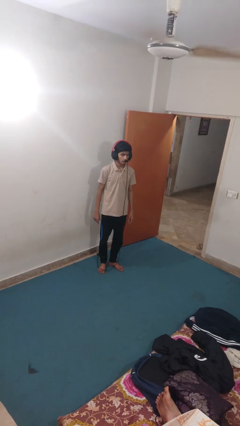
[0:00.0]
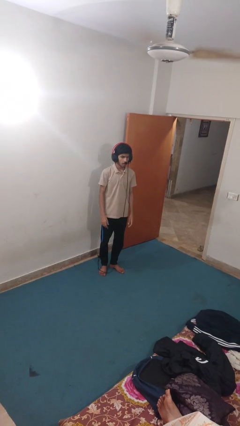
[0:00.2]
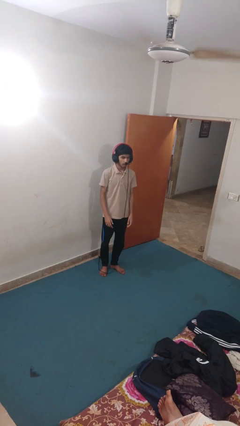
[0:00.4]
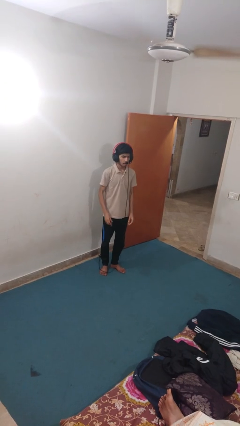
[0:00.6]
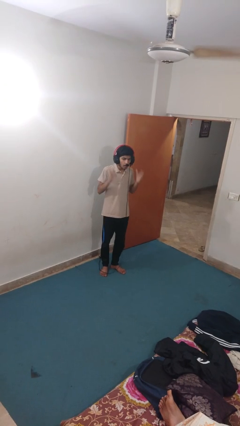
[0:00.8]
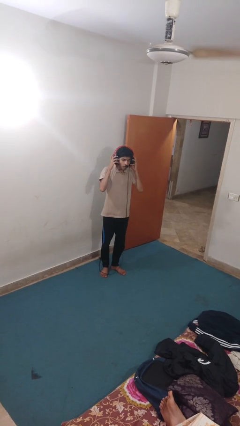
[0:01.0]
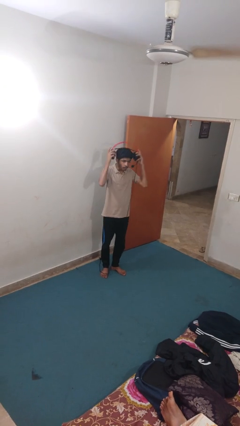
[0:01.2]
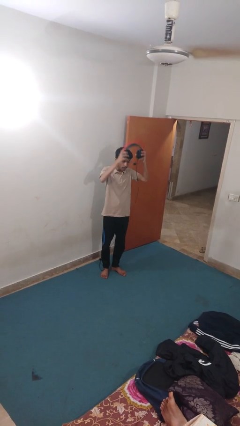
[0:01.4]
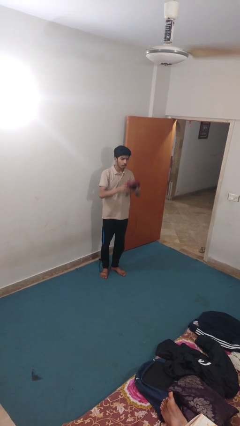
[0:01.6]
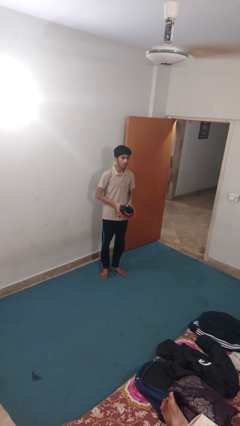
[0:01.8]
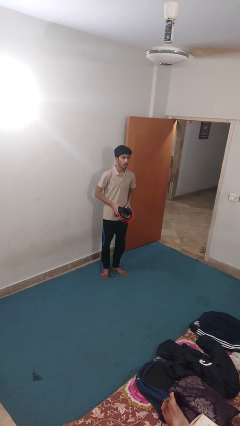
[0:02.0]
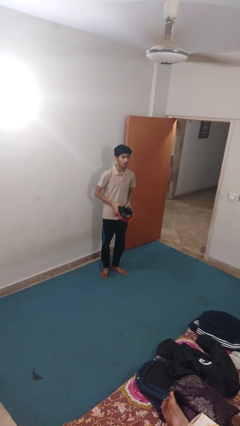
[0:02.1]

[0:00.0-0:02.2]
person takes off headphones

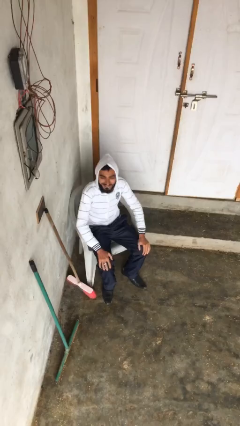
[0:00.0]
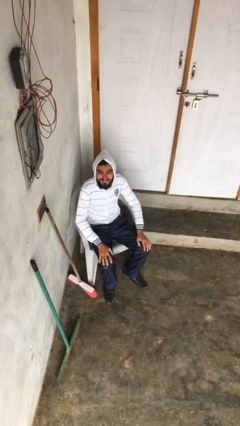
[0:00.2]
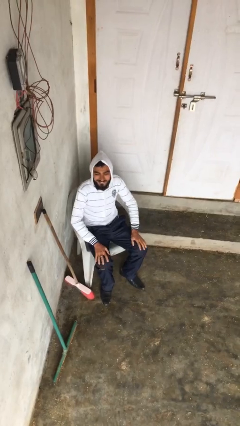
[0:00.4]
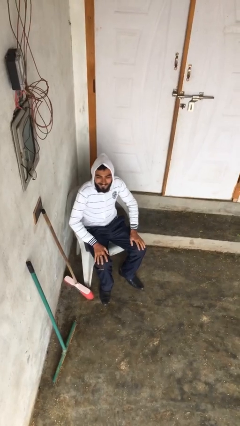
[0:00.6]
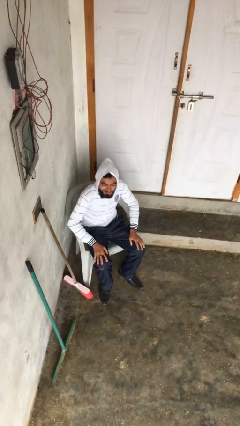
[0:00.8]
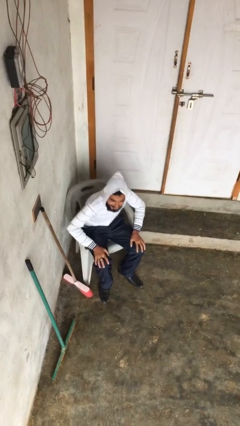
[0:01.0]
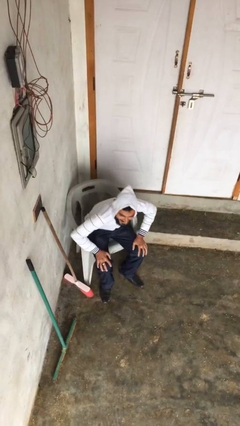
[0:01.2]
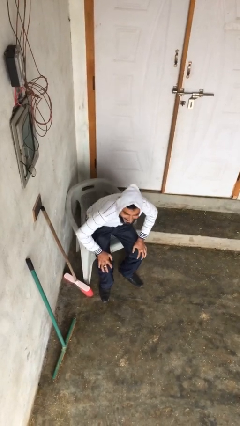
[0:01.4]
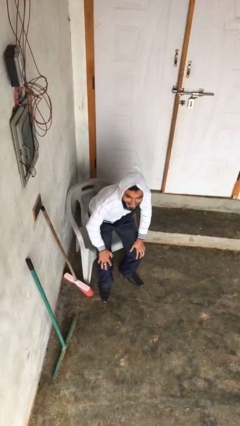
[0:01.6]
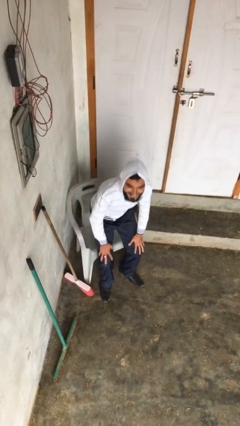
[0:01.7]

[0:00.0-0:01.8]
person stands up

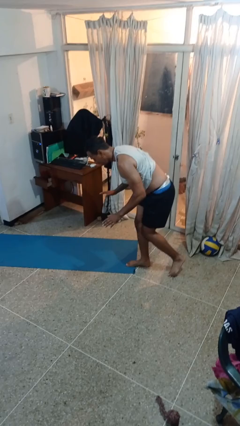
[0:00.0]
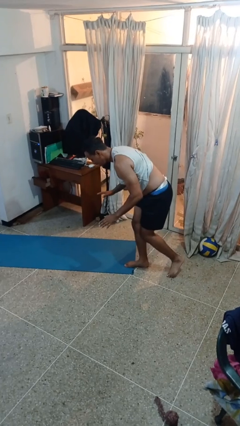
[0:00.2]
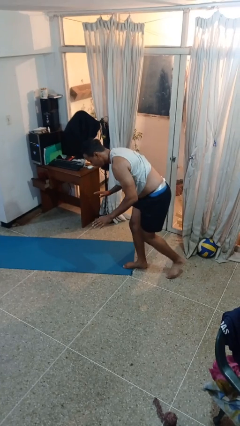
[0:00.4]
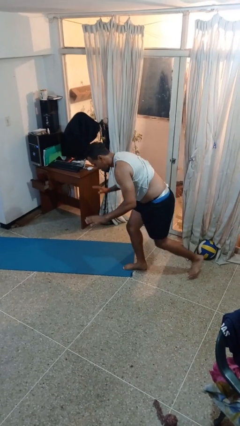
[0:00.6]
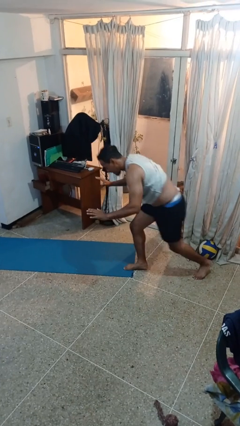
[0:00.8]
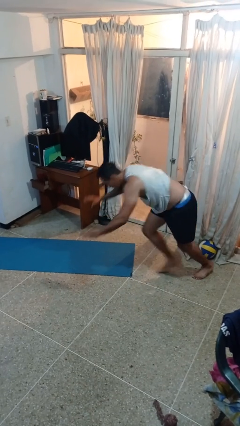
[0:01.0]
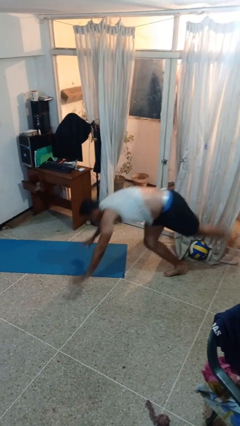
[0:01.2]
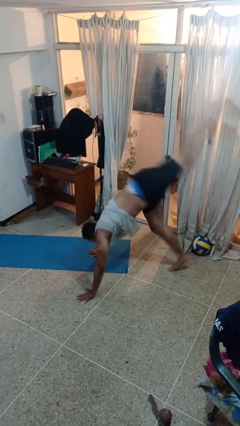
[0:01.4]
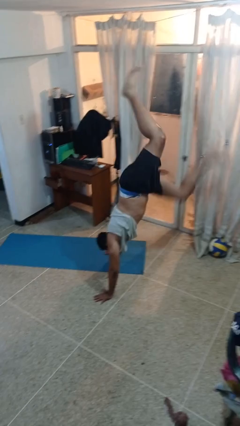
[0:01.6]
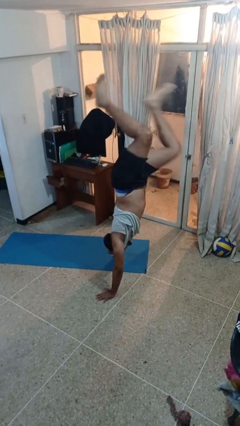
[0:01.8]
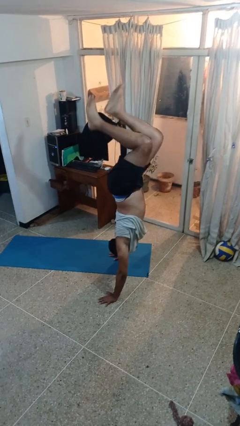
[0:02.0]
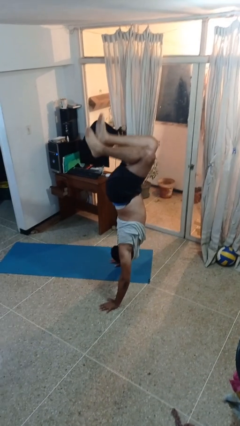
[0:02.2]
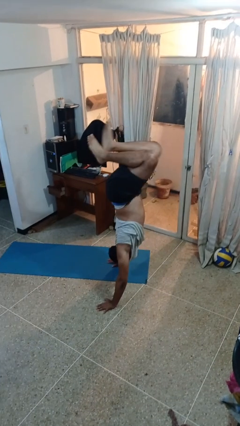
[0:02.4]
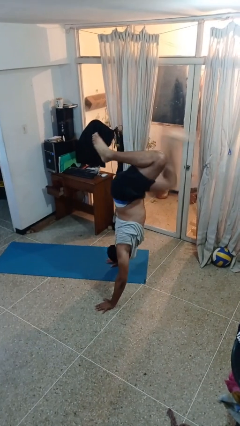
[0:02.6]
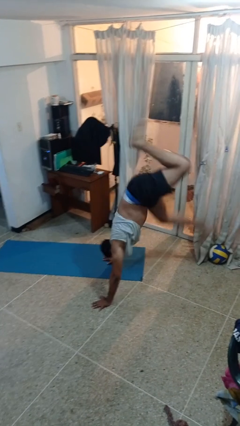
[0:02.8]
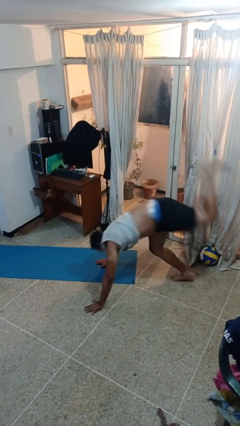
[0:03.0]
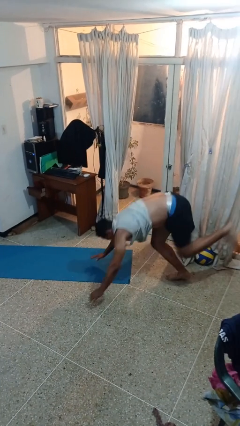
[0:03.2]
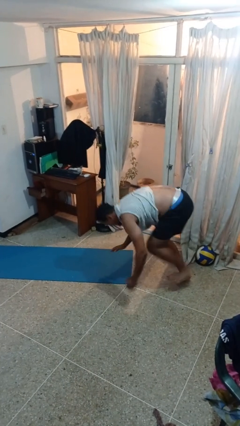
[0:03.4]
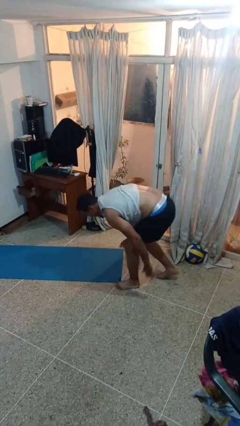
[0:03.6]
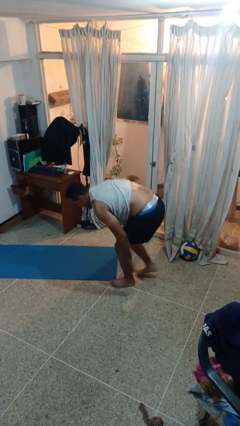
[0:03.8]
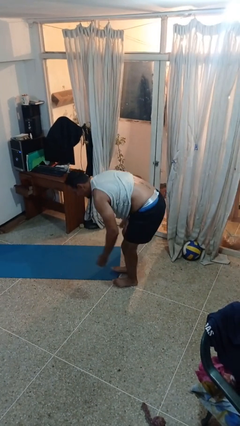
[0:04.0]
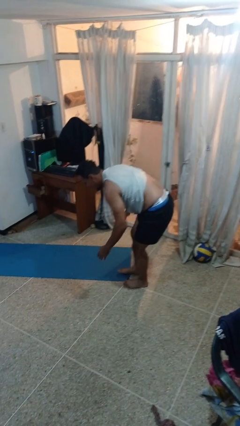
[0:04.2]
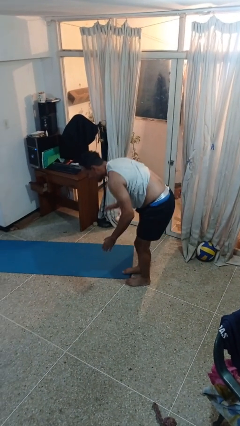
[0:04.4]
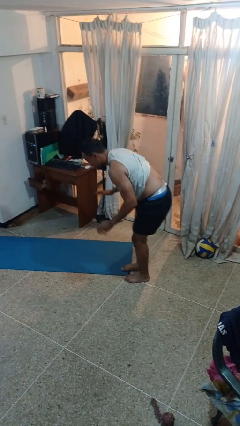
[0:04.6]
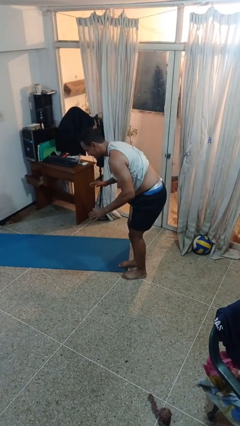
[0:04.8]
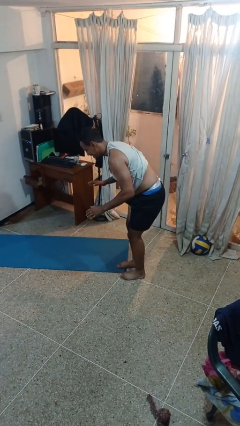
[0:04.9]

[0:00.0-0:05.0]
person handstand

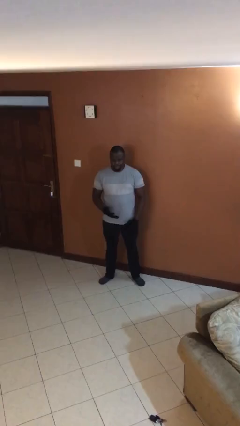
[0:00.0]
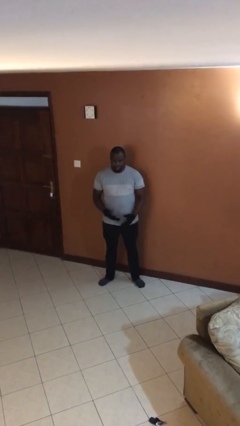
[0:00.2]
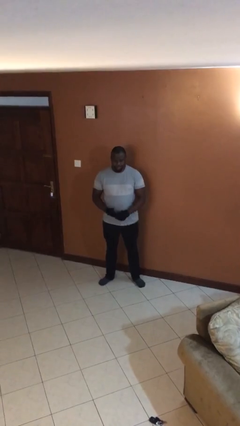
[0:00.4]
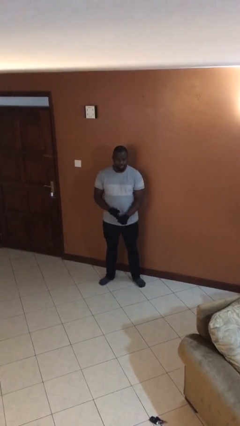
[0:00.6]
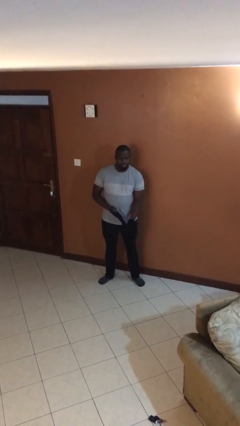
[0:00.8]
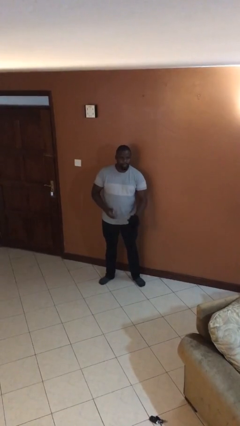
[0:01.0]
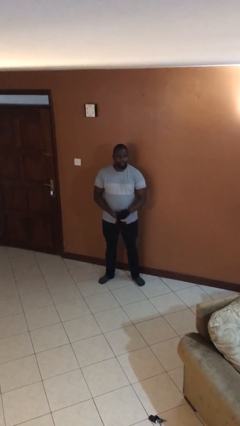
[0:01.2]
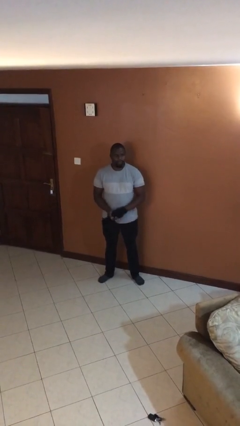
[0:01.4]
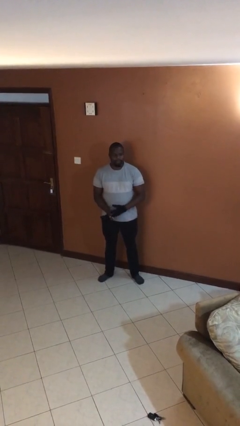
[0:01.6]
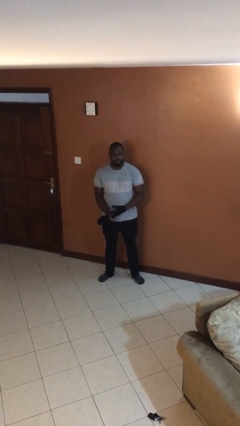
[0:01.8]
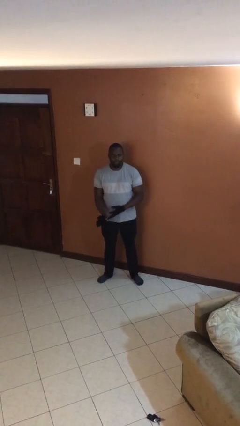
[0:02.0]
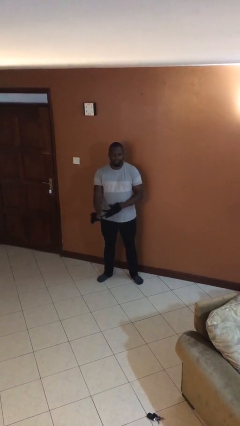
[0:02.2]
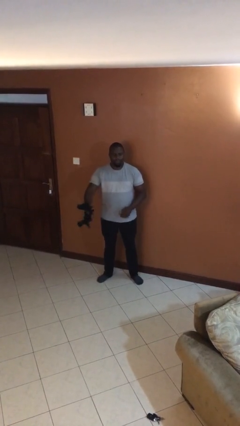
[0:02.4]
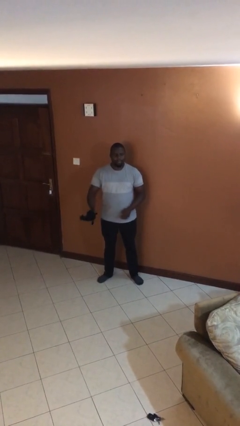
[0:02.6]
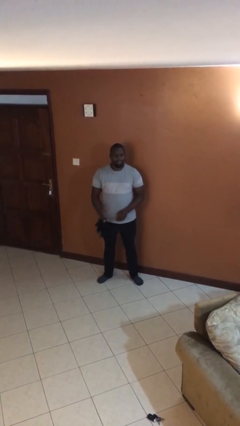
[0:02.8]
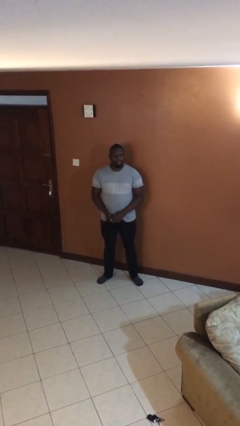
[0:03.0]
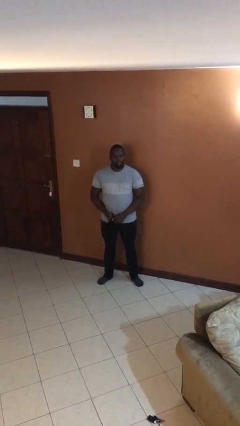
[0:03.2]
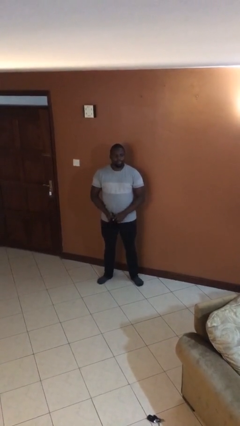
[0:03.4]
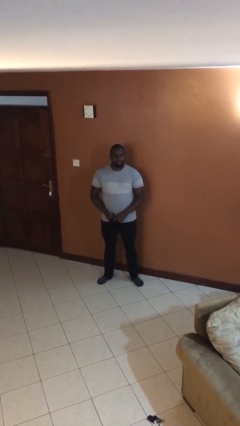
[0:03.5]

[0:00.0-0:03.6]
person takes off gloves

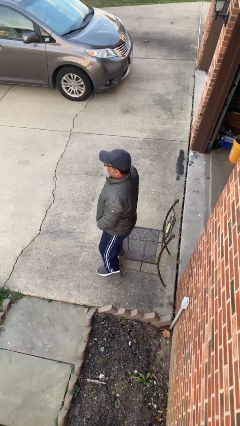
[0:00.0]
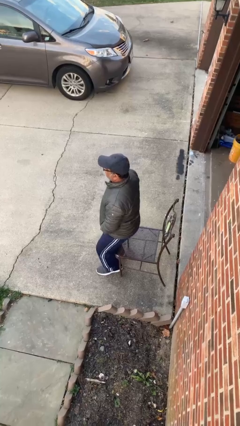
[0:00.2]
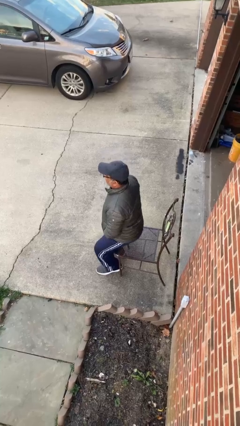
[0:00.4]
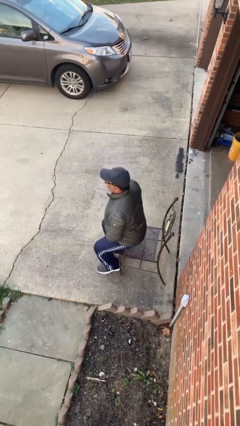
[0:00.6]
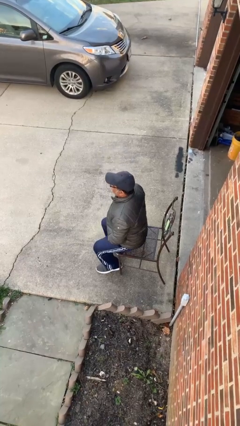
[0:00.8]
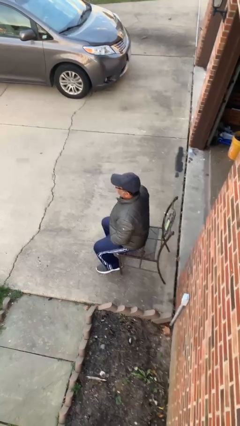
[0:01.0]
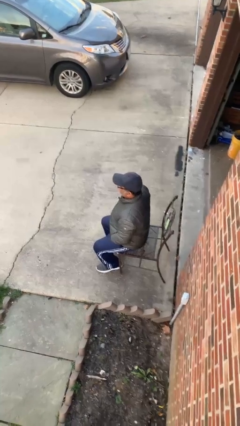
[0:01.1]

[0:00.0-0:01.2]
person sits down

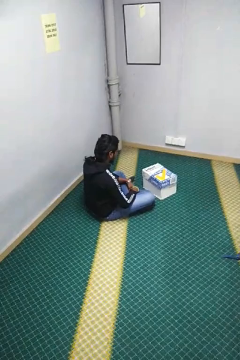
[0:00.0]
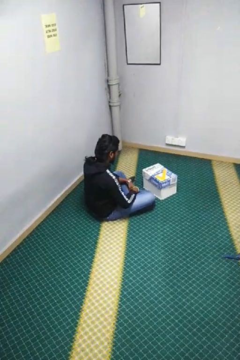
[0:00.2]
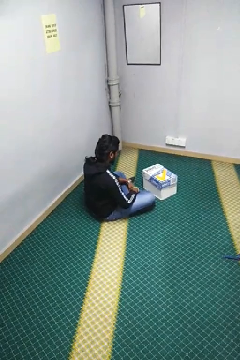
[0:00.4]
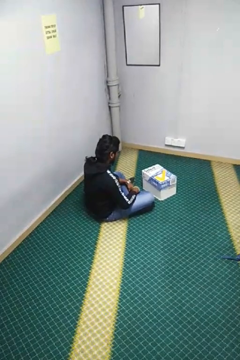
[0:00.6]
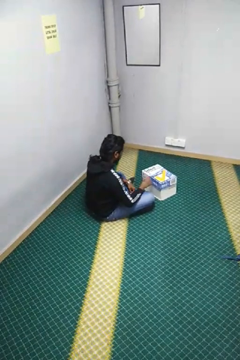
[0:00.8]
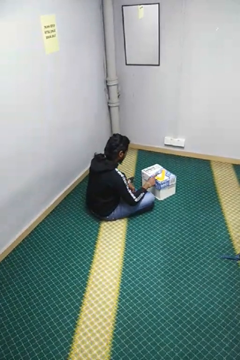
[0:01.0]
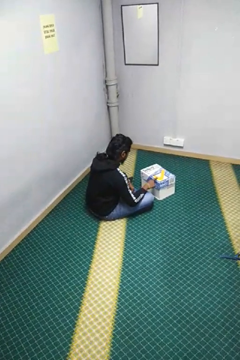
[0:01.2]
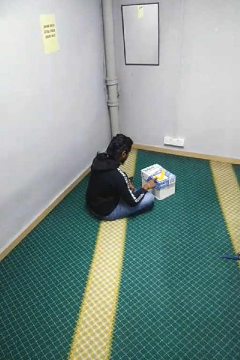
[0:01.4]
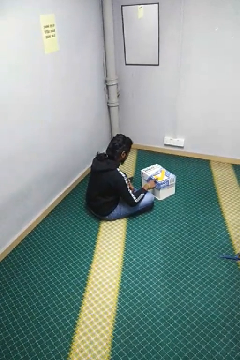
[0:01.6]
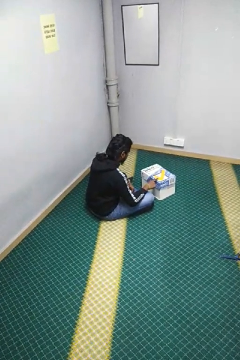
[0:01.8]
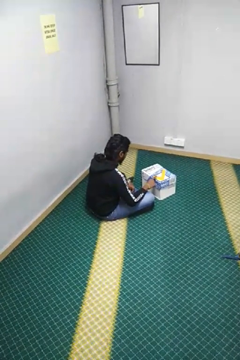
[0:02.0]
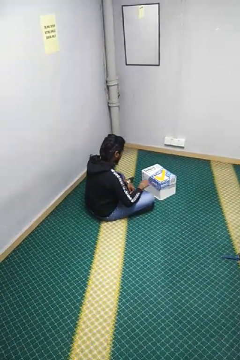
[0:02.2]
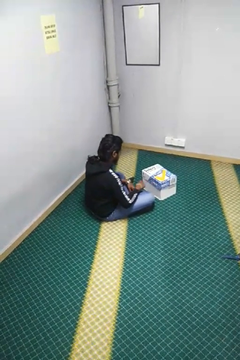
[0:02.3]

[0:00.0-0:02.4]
person taps object with finger

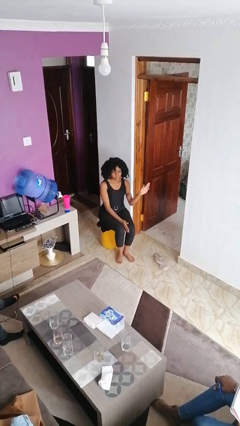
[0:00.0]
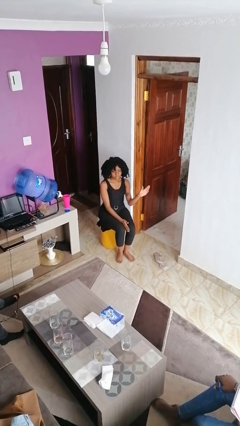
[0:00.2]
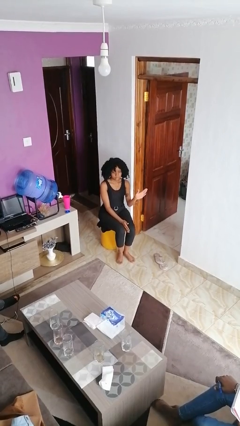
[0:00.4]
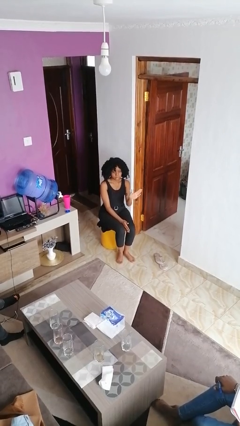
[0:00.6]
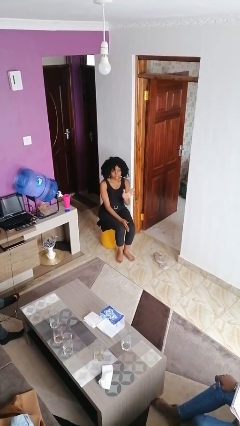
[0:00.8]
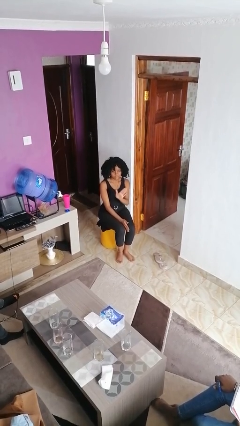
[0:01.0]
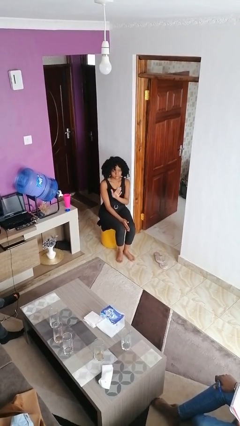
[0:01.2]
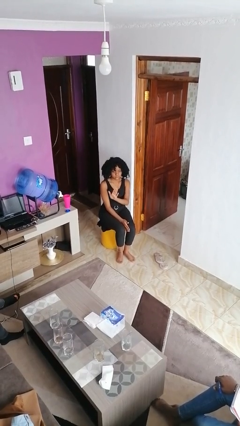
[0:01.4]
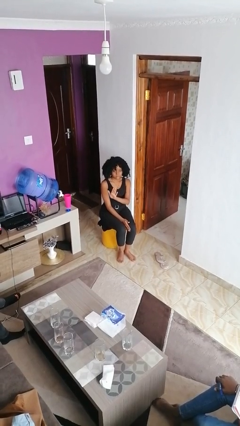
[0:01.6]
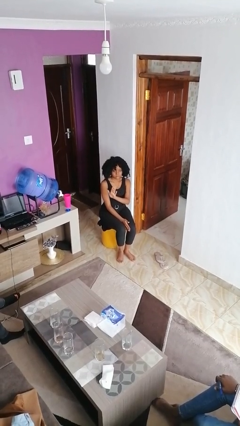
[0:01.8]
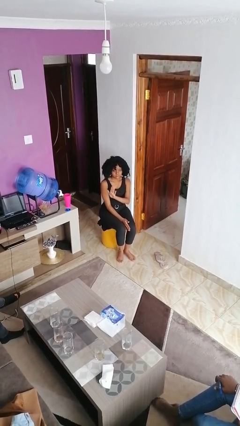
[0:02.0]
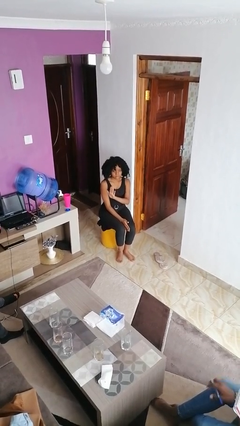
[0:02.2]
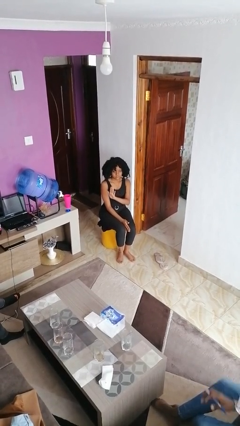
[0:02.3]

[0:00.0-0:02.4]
person gestures swipe right
